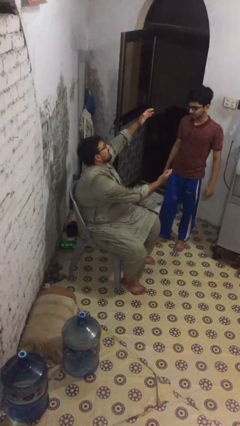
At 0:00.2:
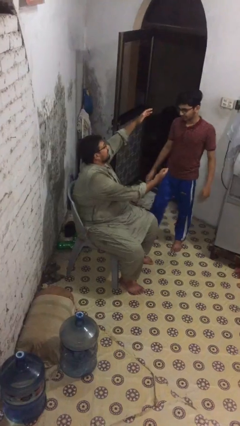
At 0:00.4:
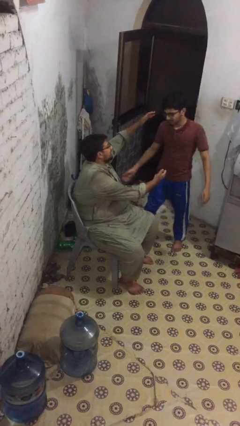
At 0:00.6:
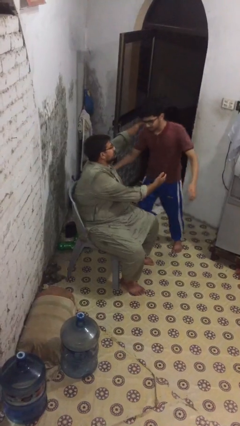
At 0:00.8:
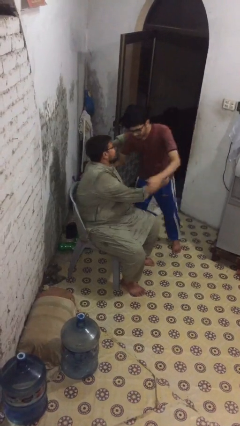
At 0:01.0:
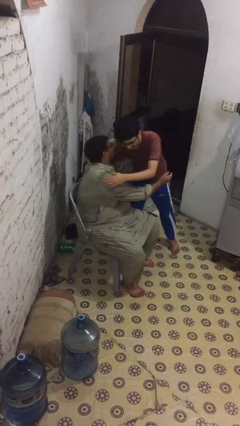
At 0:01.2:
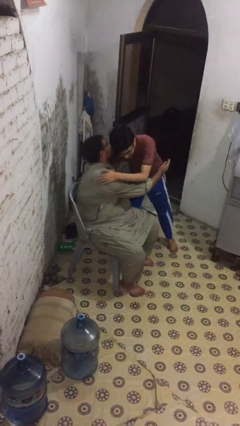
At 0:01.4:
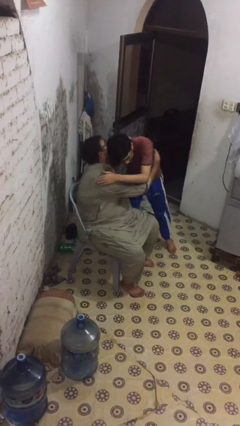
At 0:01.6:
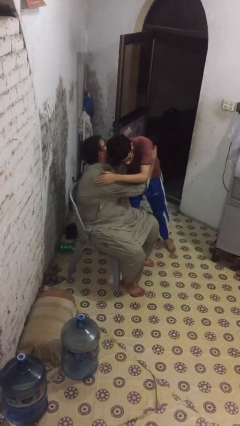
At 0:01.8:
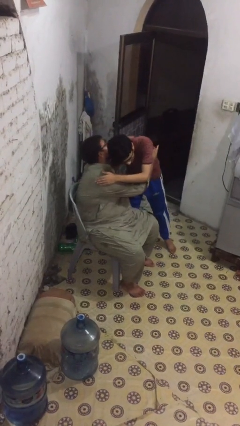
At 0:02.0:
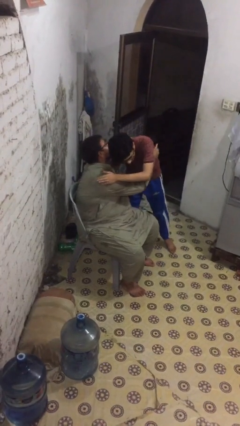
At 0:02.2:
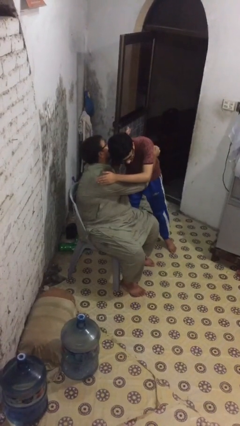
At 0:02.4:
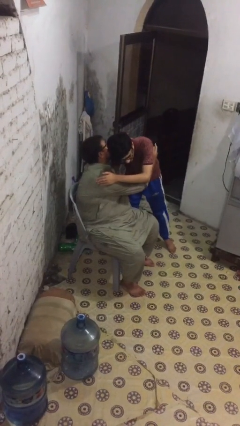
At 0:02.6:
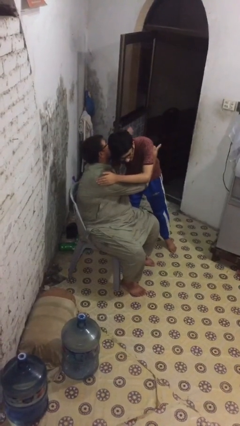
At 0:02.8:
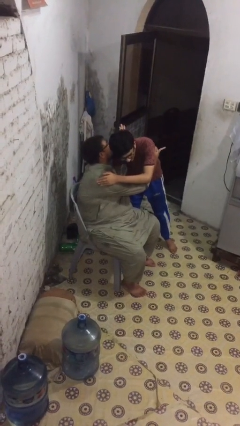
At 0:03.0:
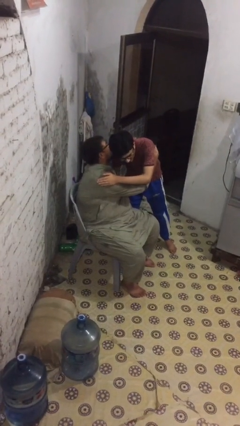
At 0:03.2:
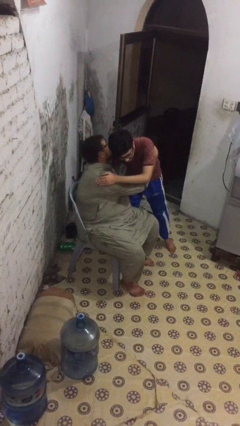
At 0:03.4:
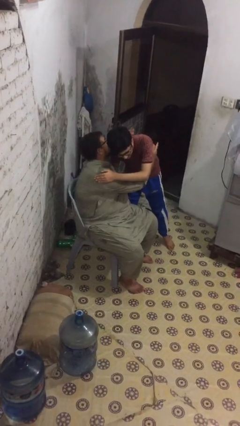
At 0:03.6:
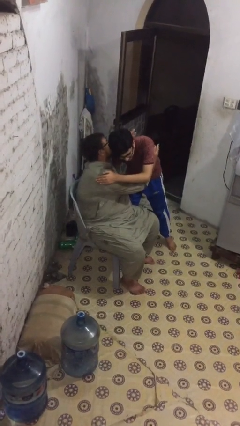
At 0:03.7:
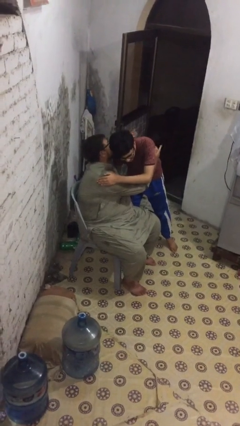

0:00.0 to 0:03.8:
person embraces person

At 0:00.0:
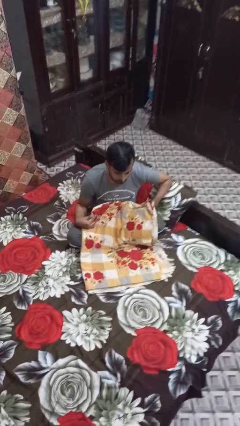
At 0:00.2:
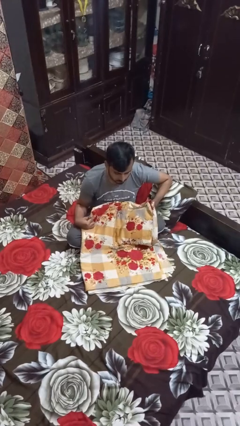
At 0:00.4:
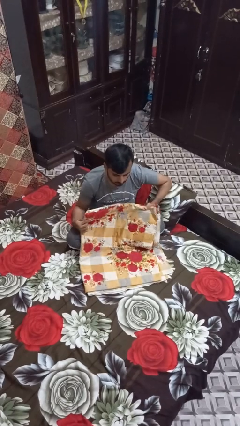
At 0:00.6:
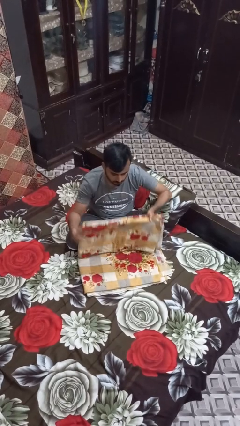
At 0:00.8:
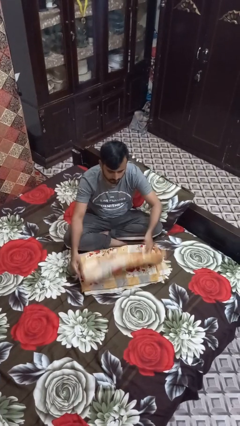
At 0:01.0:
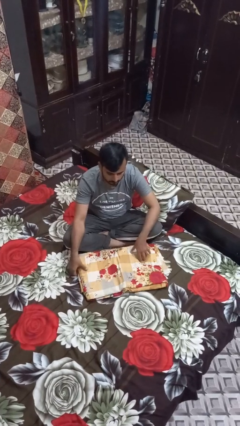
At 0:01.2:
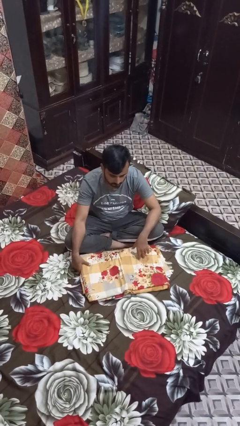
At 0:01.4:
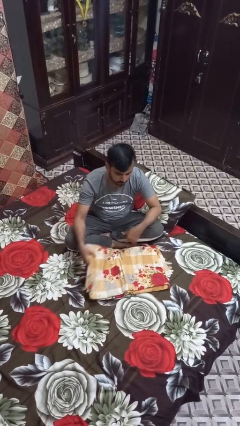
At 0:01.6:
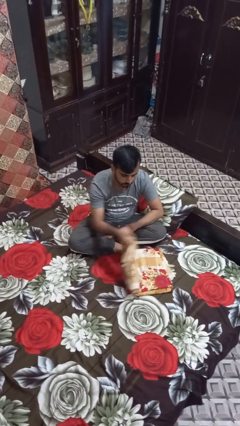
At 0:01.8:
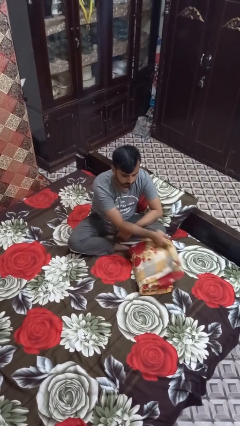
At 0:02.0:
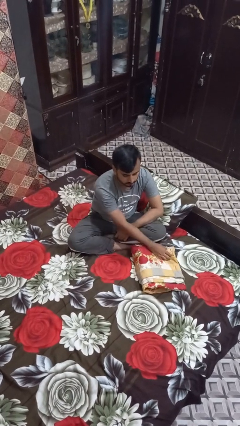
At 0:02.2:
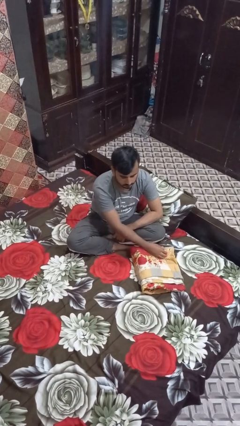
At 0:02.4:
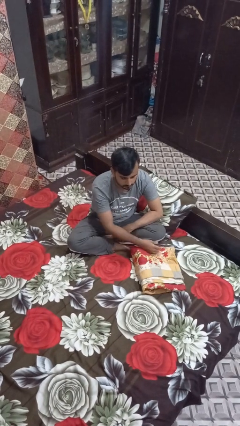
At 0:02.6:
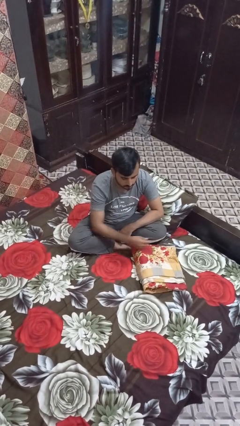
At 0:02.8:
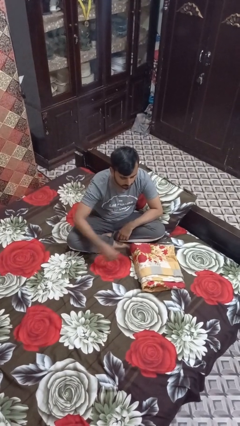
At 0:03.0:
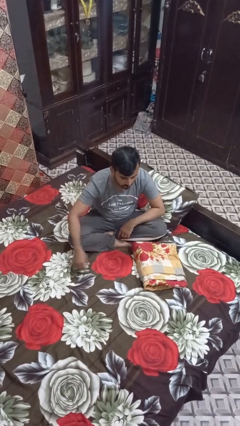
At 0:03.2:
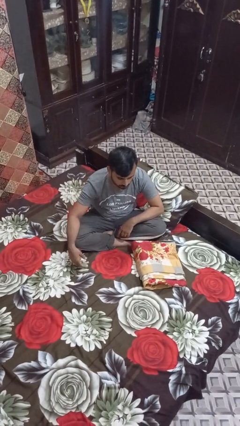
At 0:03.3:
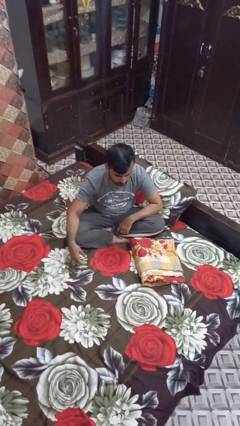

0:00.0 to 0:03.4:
person folds blanket

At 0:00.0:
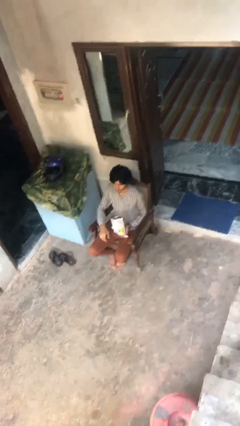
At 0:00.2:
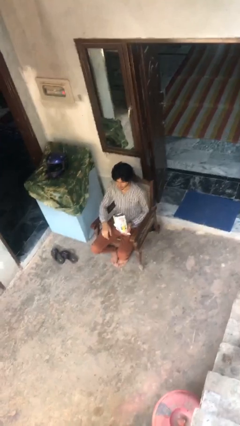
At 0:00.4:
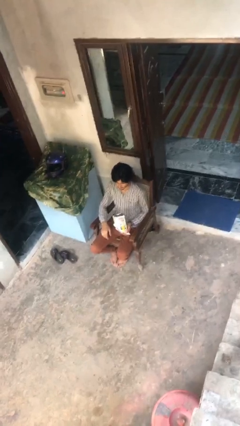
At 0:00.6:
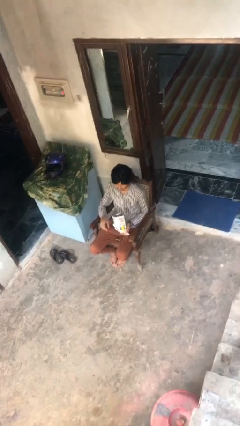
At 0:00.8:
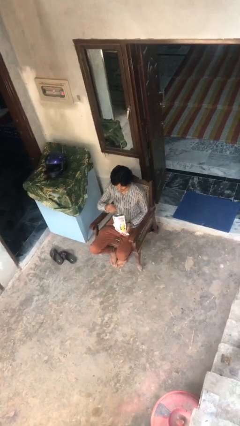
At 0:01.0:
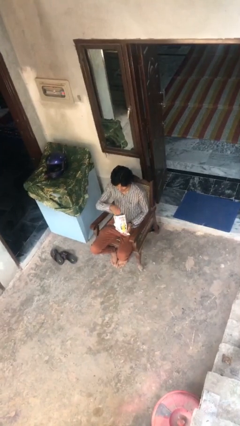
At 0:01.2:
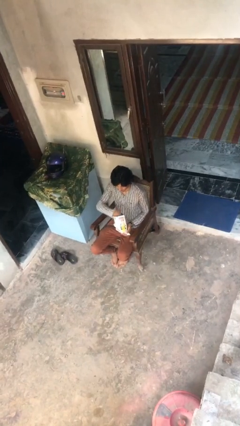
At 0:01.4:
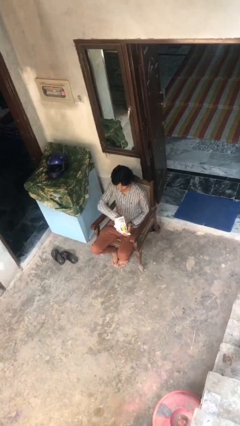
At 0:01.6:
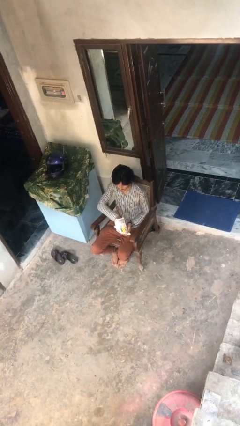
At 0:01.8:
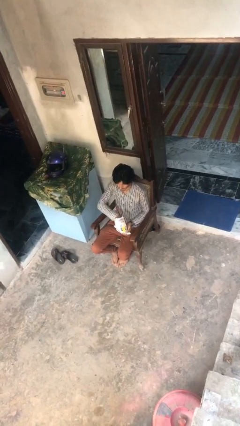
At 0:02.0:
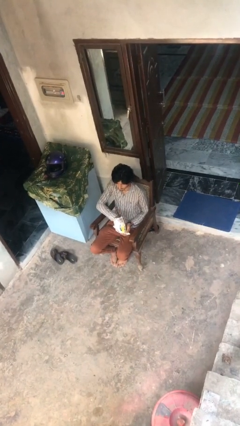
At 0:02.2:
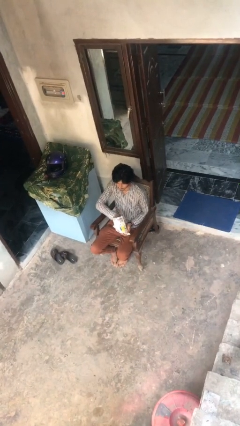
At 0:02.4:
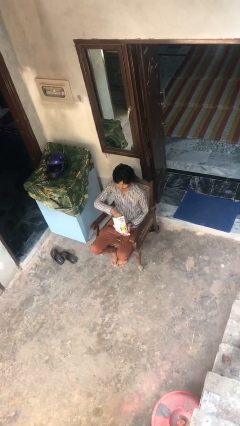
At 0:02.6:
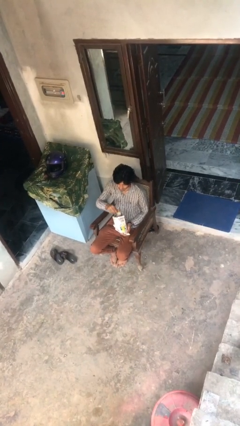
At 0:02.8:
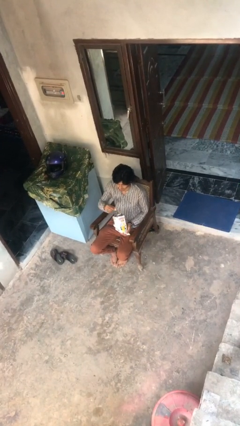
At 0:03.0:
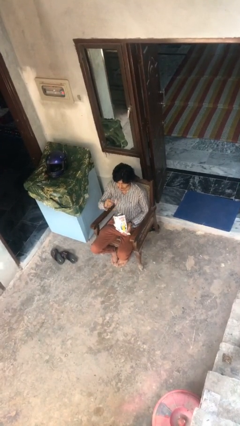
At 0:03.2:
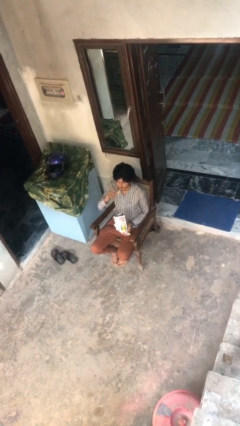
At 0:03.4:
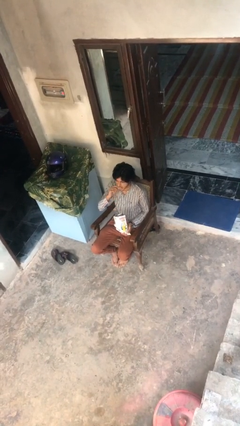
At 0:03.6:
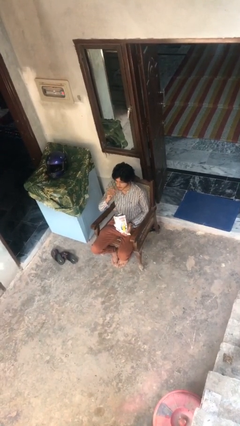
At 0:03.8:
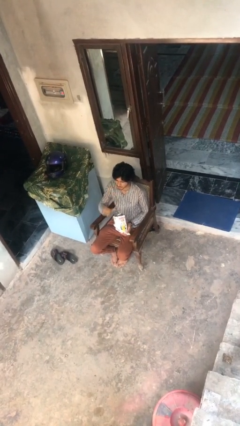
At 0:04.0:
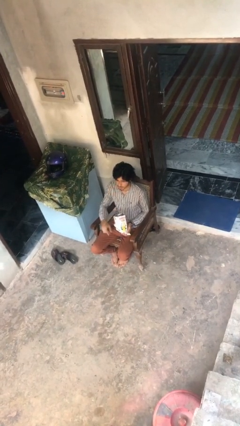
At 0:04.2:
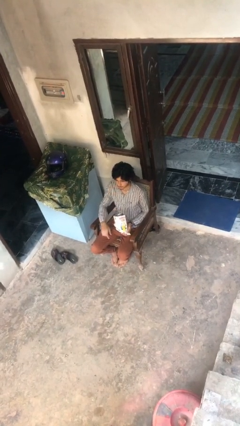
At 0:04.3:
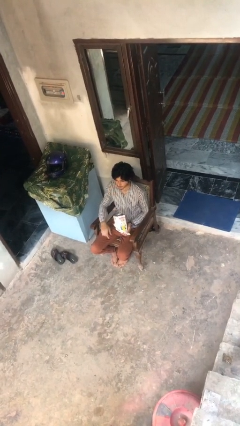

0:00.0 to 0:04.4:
person eats snack from bag

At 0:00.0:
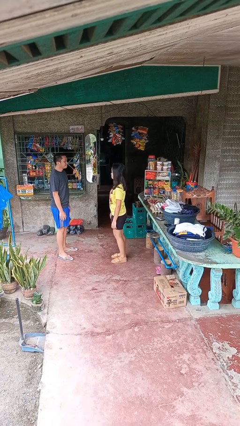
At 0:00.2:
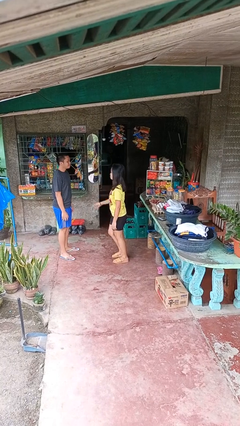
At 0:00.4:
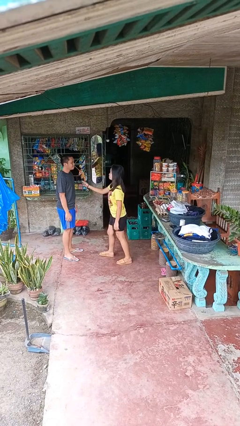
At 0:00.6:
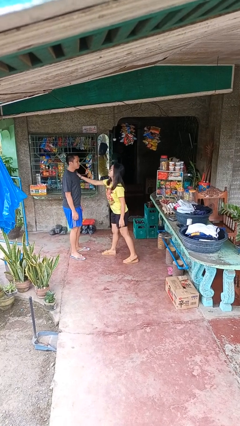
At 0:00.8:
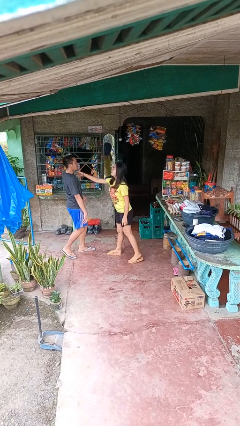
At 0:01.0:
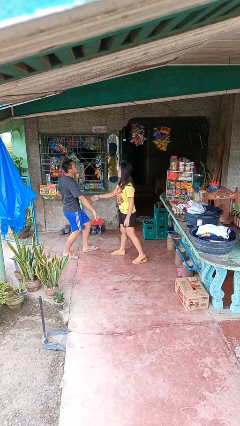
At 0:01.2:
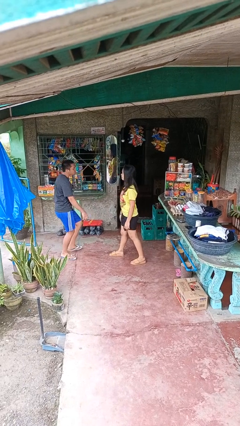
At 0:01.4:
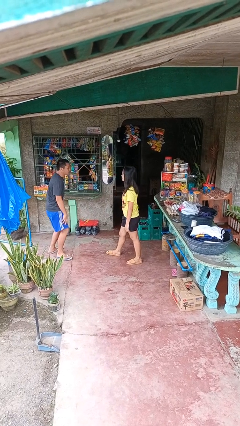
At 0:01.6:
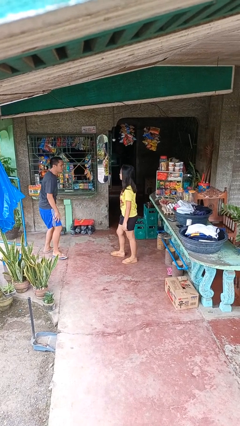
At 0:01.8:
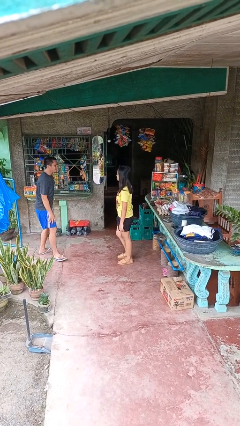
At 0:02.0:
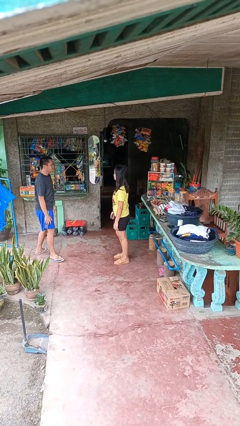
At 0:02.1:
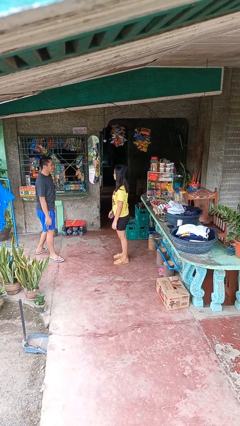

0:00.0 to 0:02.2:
person shoves person

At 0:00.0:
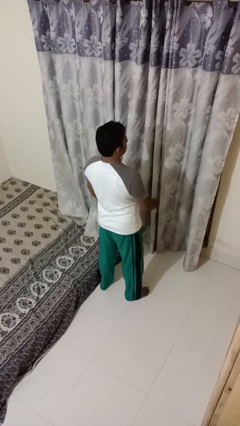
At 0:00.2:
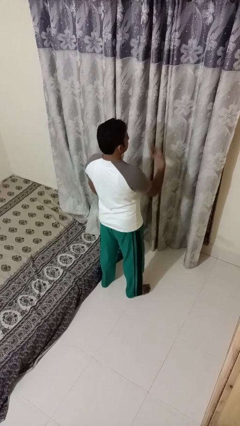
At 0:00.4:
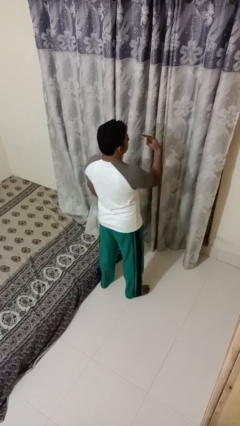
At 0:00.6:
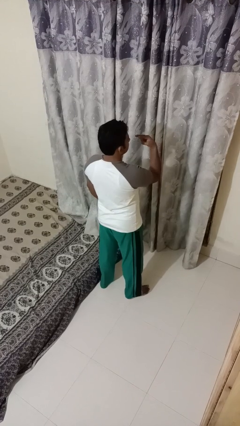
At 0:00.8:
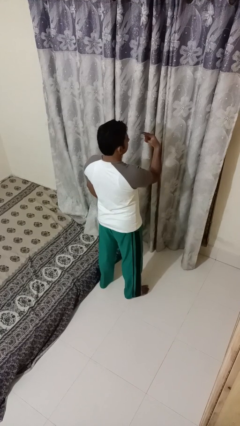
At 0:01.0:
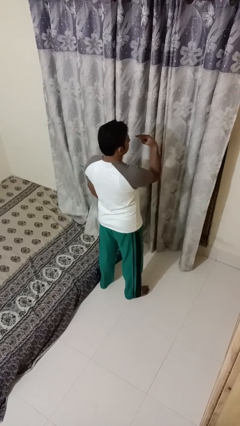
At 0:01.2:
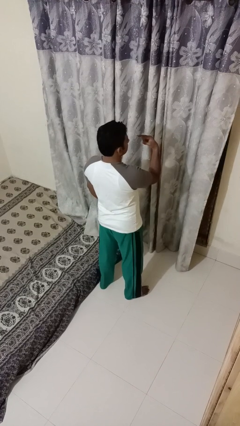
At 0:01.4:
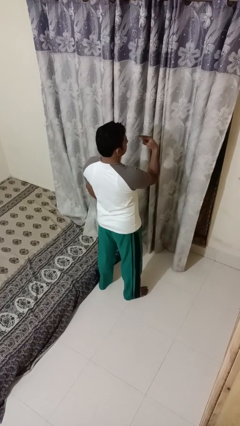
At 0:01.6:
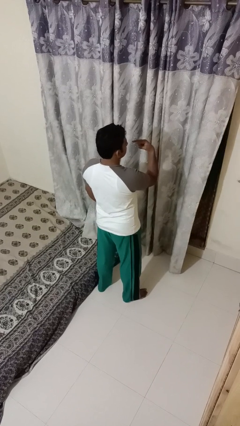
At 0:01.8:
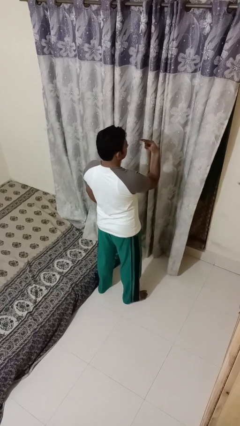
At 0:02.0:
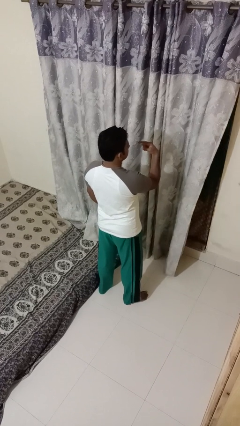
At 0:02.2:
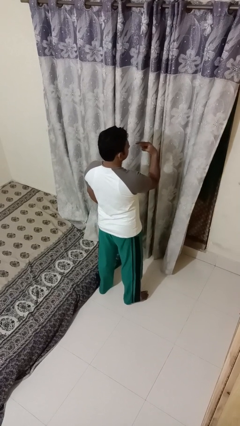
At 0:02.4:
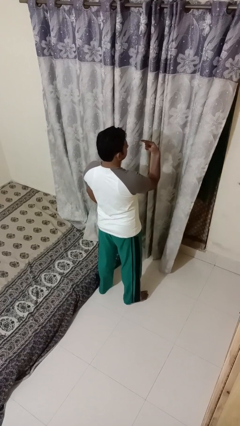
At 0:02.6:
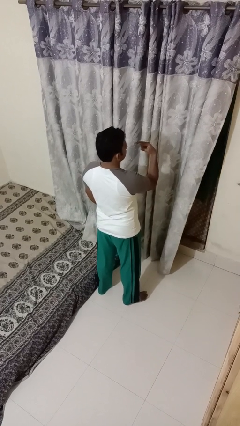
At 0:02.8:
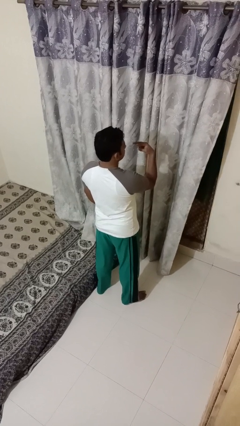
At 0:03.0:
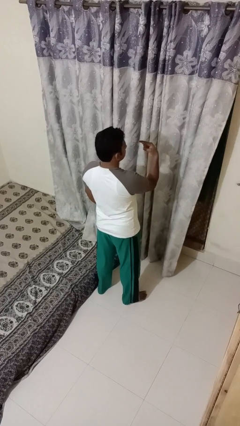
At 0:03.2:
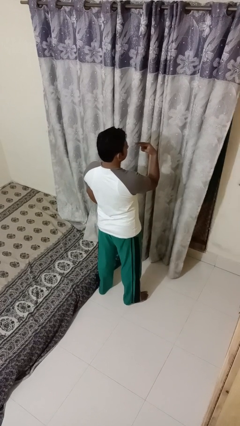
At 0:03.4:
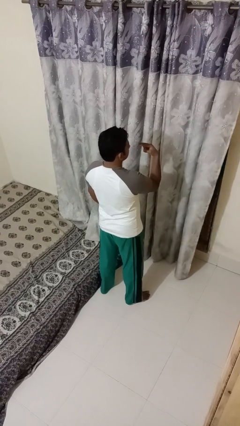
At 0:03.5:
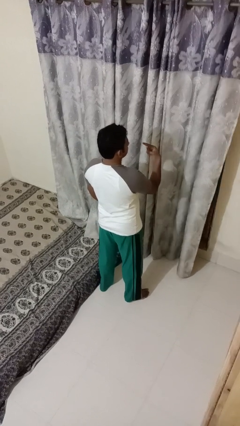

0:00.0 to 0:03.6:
person gestures watch closely

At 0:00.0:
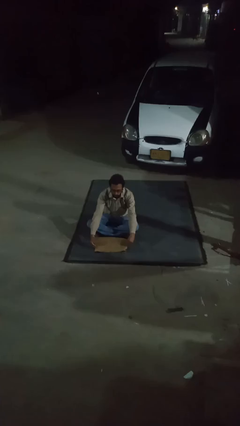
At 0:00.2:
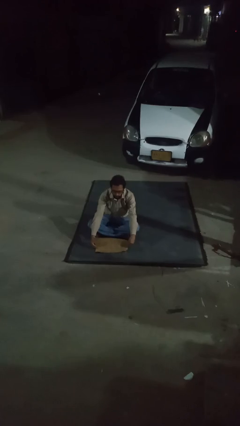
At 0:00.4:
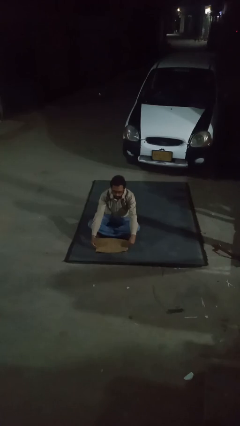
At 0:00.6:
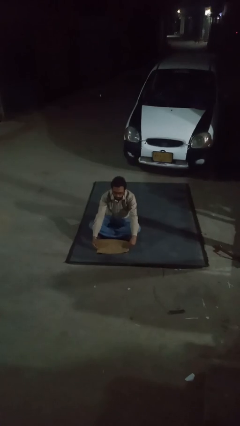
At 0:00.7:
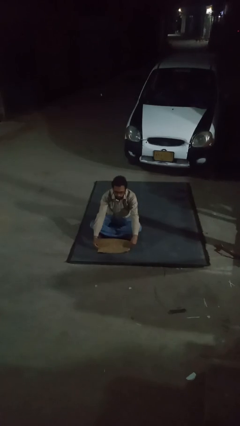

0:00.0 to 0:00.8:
person closes laptop
